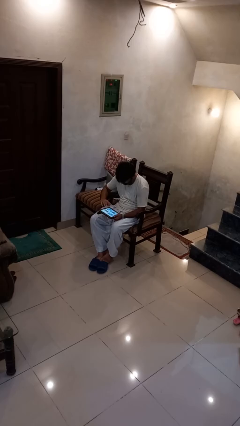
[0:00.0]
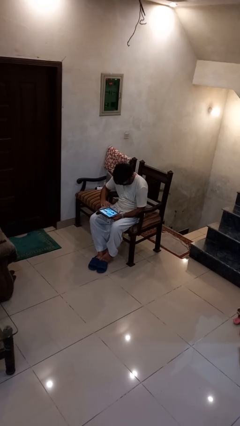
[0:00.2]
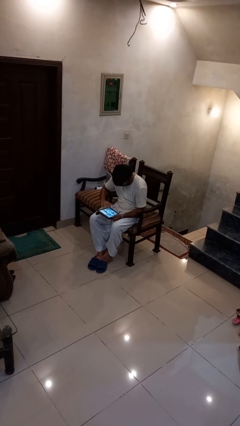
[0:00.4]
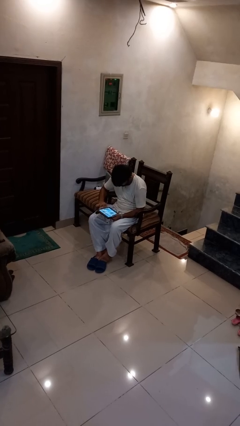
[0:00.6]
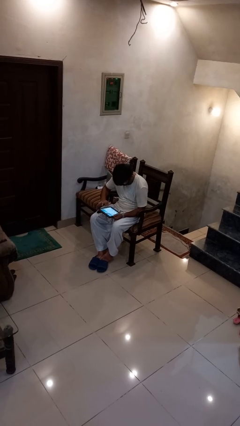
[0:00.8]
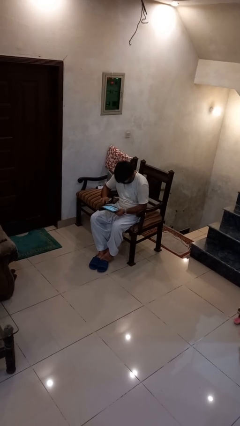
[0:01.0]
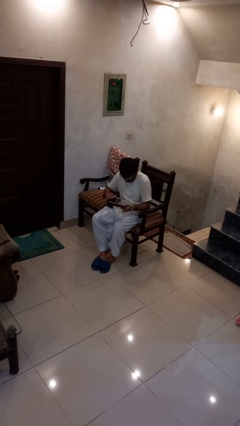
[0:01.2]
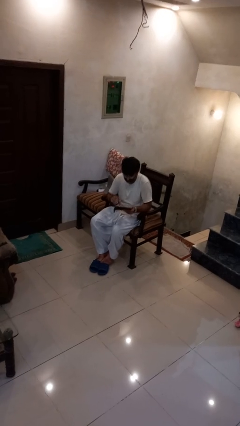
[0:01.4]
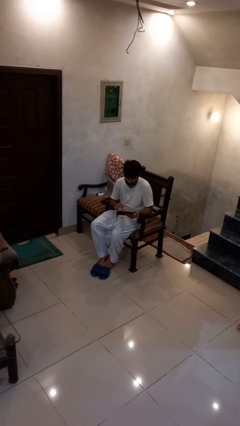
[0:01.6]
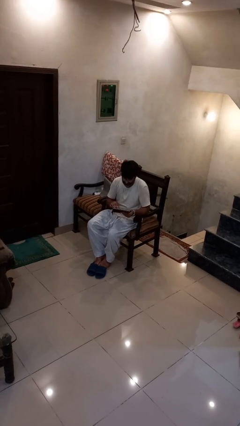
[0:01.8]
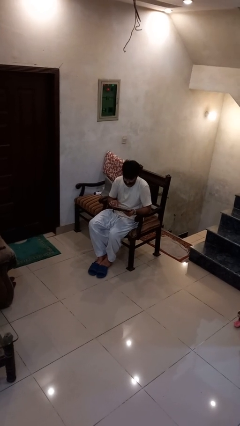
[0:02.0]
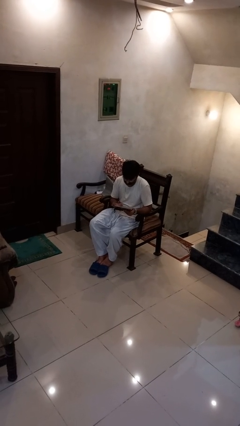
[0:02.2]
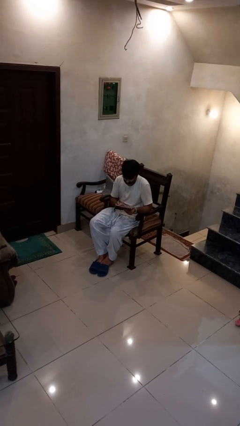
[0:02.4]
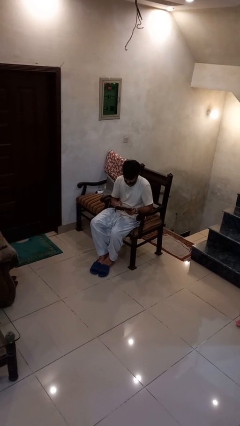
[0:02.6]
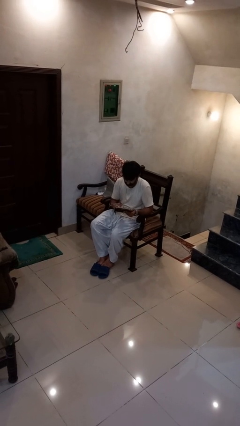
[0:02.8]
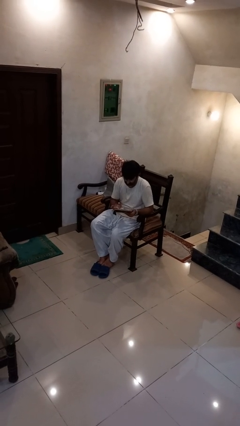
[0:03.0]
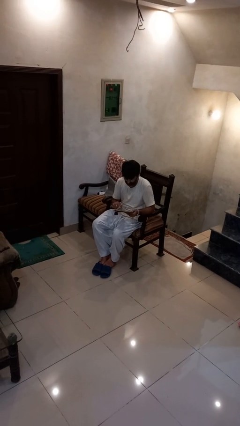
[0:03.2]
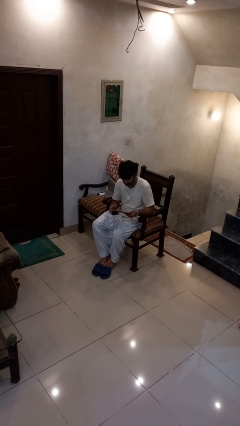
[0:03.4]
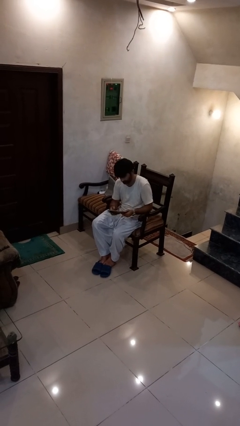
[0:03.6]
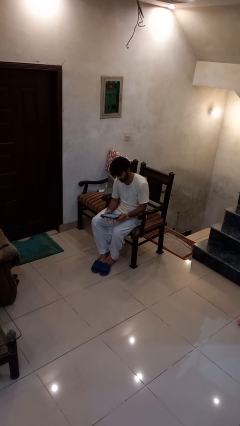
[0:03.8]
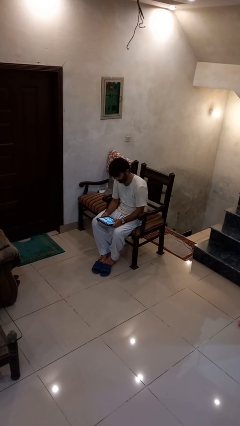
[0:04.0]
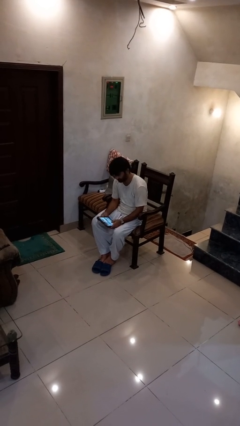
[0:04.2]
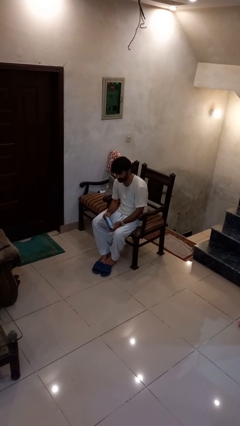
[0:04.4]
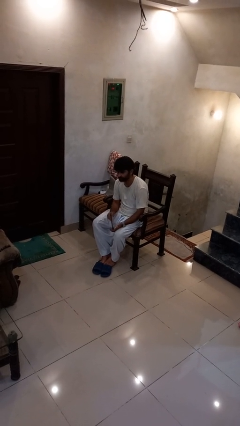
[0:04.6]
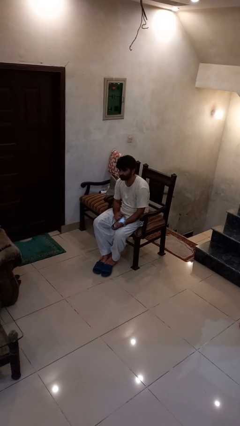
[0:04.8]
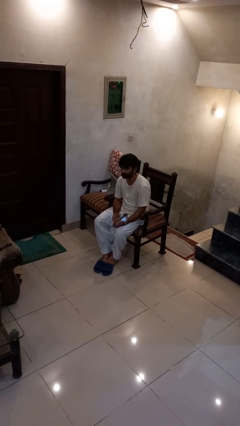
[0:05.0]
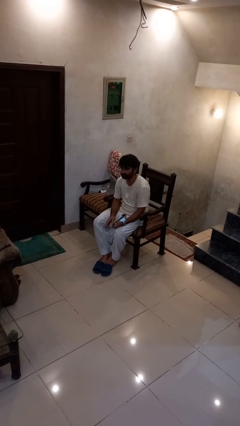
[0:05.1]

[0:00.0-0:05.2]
person interacts with tablet

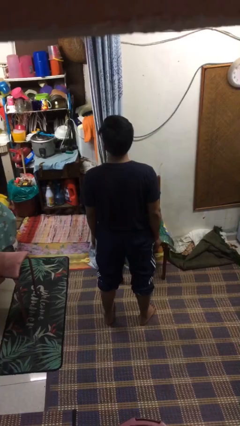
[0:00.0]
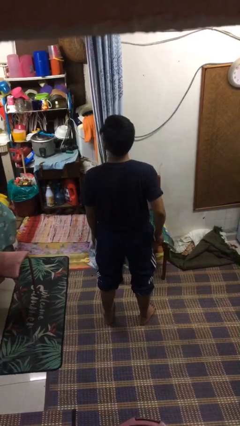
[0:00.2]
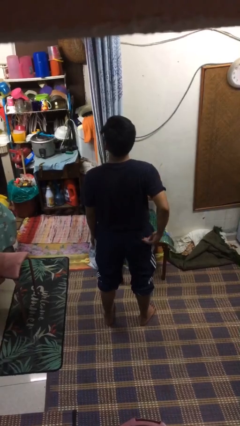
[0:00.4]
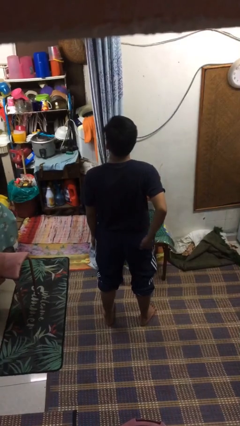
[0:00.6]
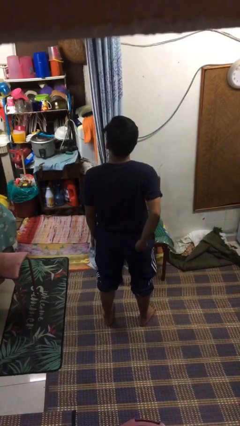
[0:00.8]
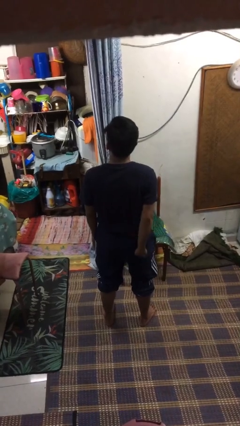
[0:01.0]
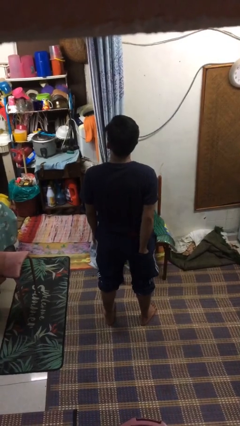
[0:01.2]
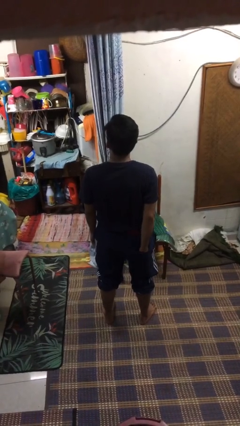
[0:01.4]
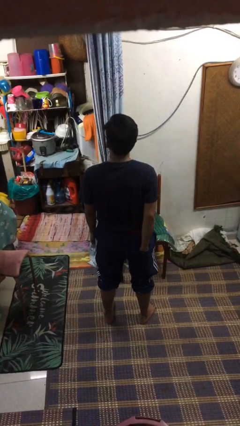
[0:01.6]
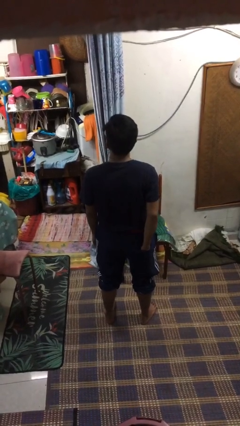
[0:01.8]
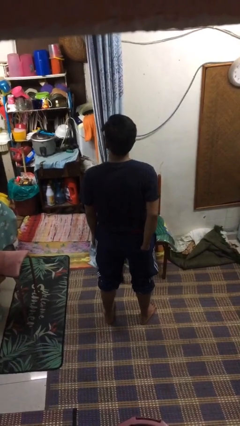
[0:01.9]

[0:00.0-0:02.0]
person puts hands in back pockets

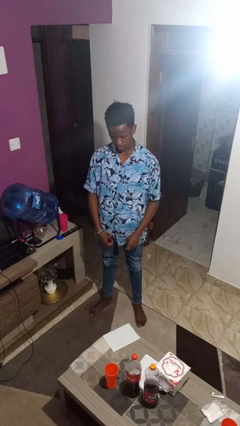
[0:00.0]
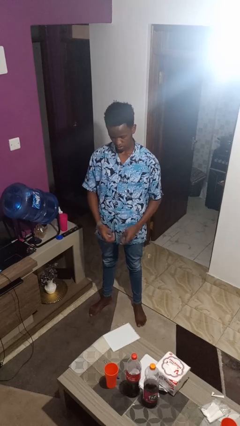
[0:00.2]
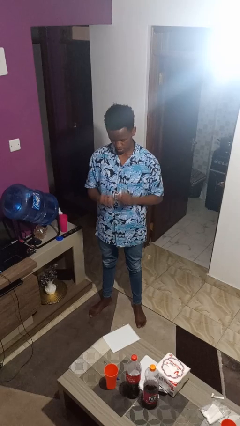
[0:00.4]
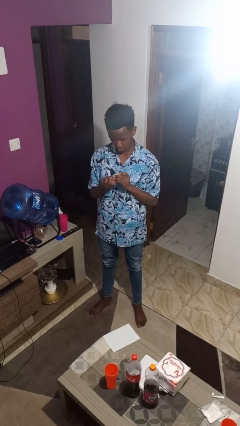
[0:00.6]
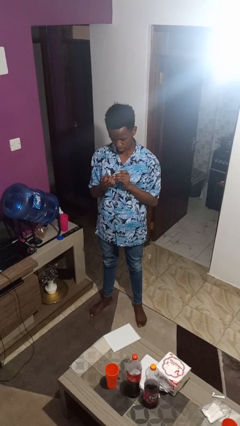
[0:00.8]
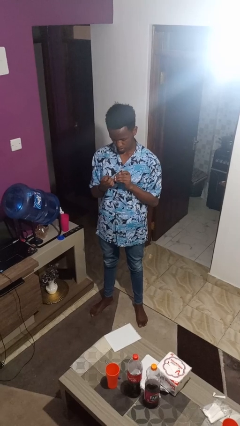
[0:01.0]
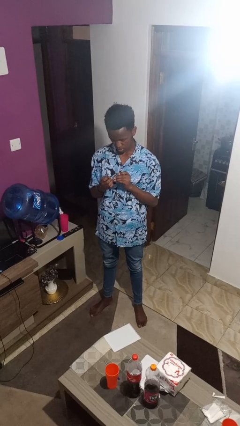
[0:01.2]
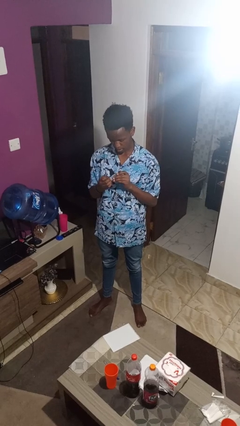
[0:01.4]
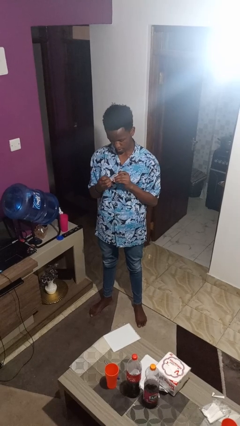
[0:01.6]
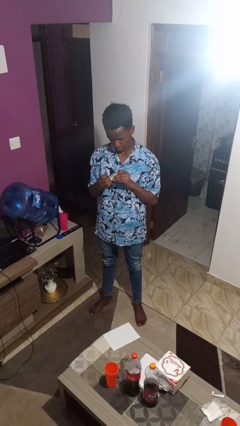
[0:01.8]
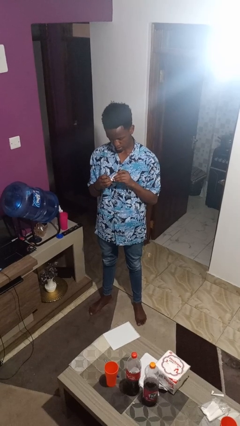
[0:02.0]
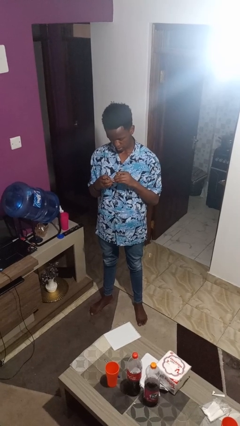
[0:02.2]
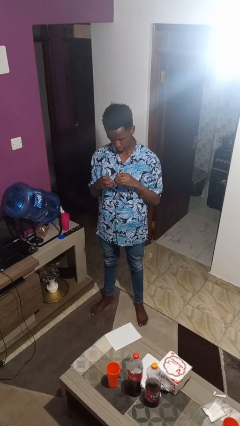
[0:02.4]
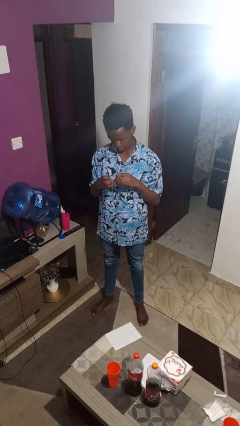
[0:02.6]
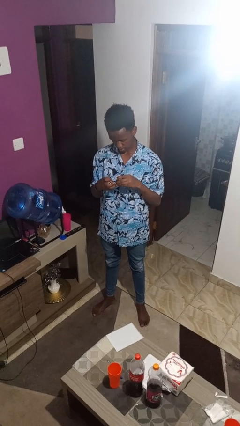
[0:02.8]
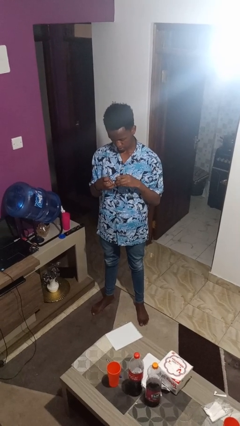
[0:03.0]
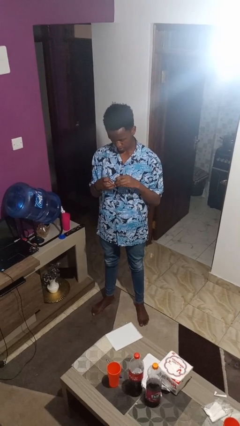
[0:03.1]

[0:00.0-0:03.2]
person clips fingernails

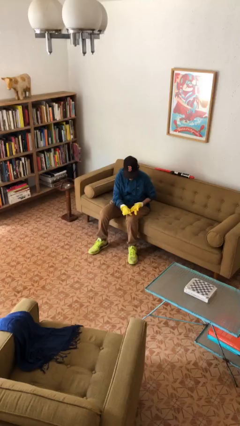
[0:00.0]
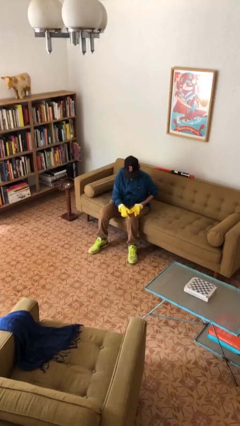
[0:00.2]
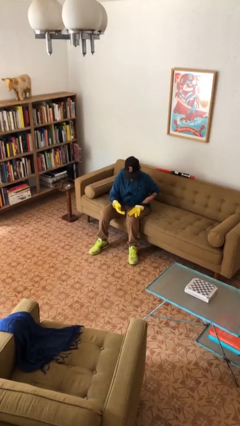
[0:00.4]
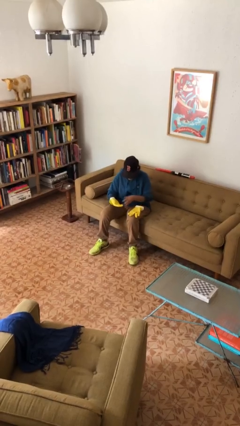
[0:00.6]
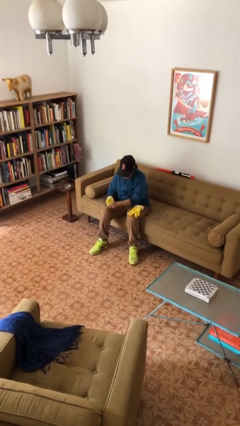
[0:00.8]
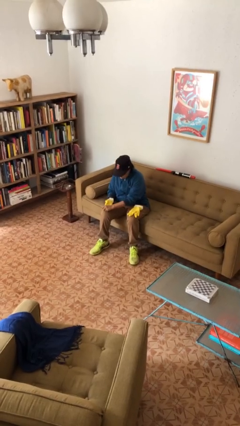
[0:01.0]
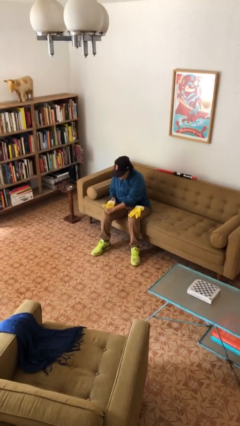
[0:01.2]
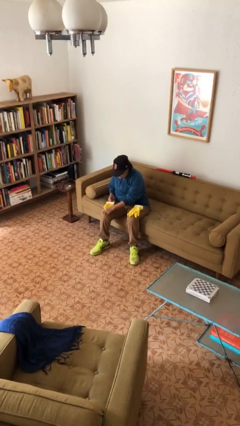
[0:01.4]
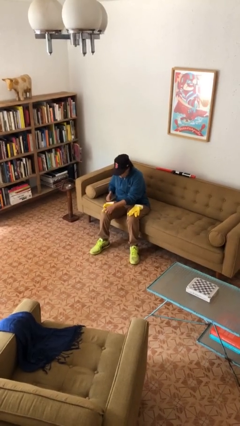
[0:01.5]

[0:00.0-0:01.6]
person takes off gloves

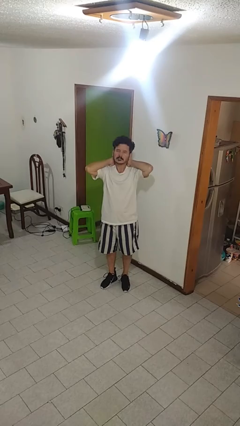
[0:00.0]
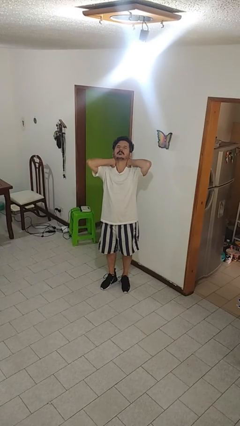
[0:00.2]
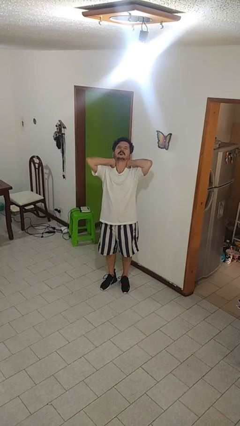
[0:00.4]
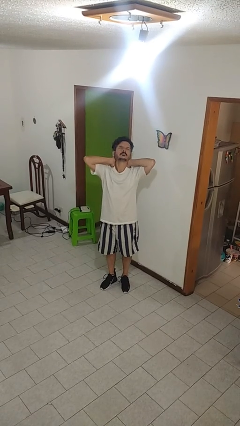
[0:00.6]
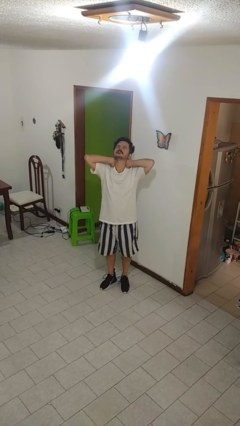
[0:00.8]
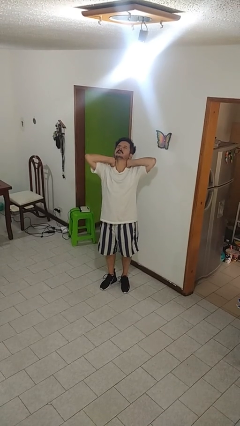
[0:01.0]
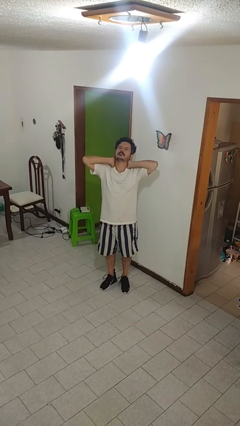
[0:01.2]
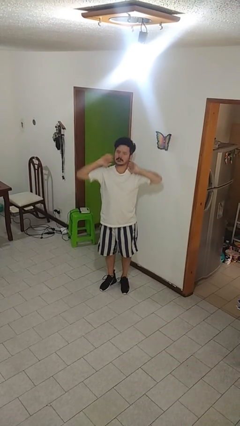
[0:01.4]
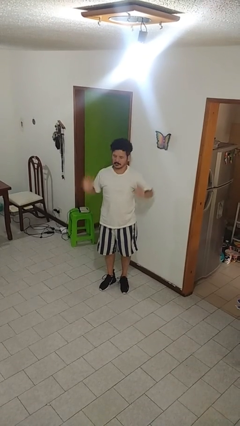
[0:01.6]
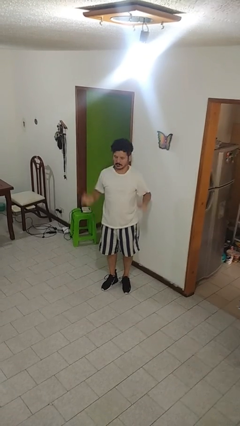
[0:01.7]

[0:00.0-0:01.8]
person rubs neck

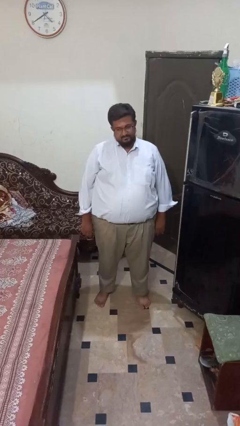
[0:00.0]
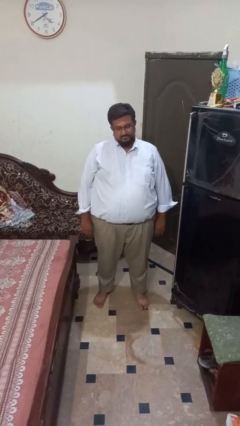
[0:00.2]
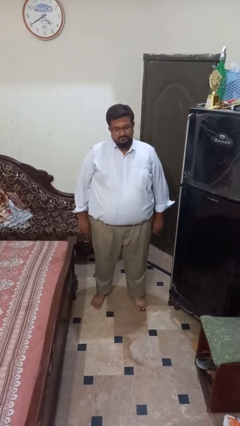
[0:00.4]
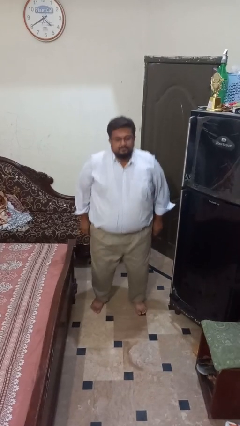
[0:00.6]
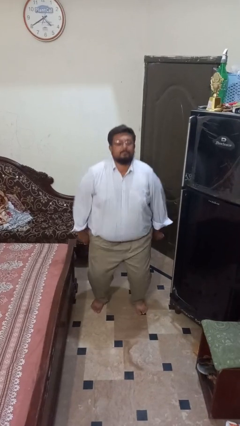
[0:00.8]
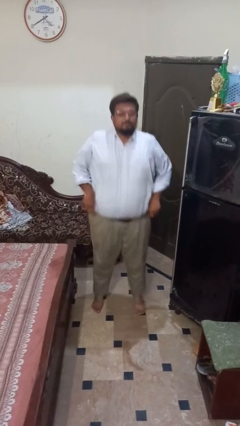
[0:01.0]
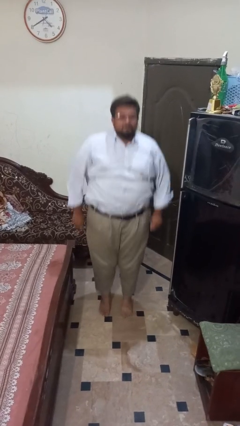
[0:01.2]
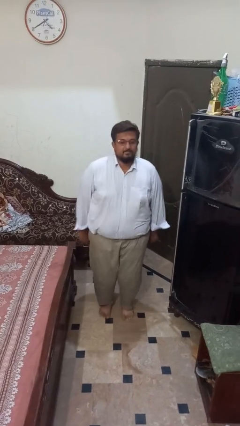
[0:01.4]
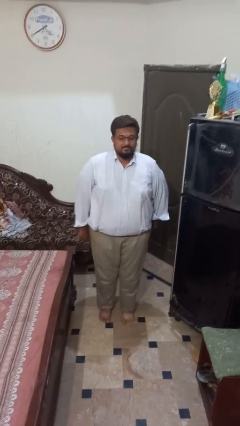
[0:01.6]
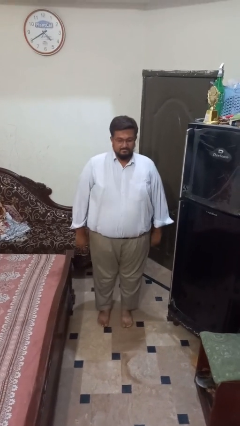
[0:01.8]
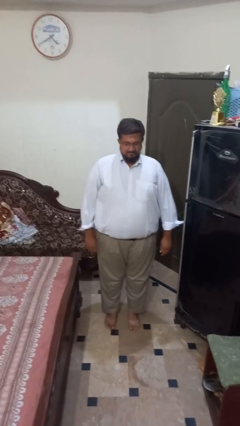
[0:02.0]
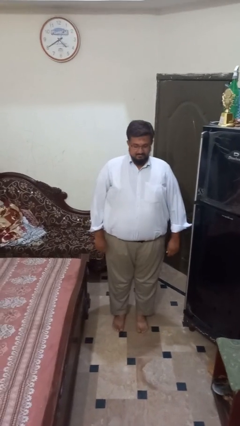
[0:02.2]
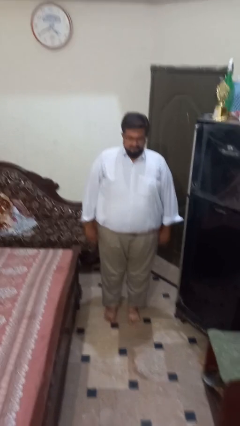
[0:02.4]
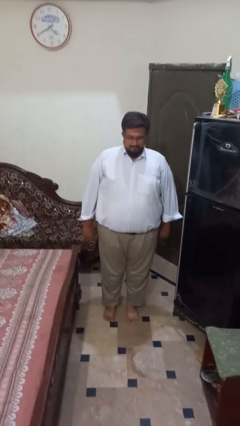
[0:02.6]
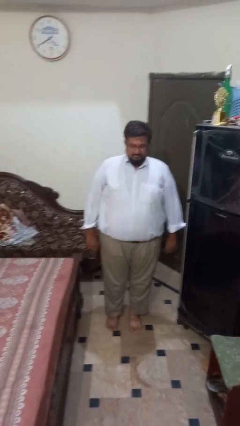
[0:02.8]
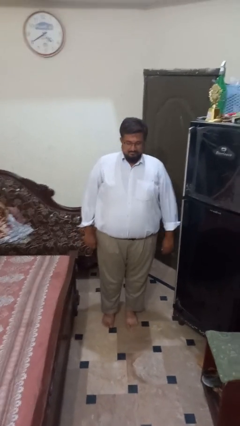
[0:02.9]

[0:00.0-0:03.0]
person jumps

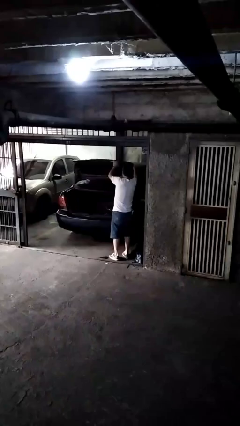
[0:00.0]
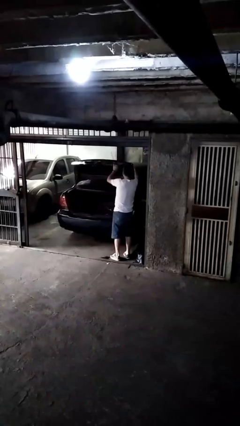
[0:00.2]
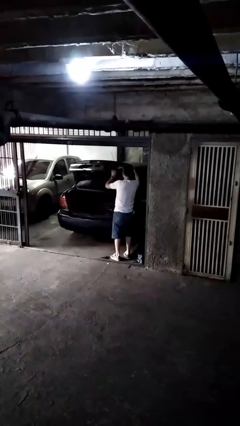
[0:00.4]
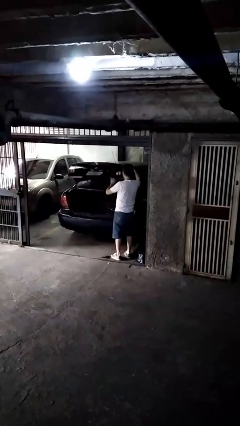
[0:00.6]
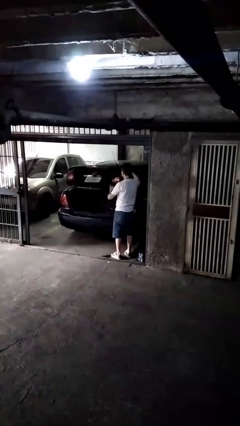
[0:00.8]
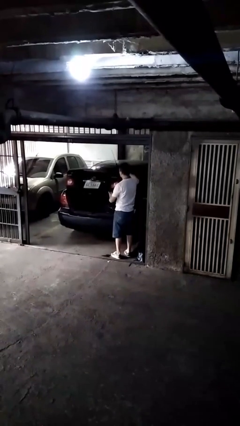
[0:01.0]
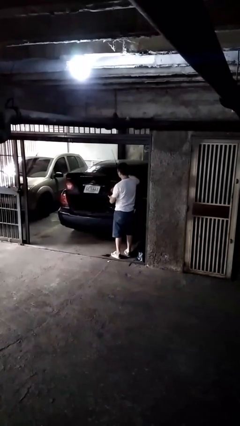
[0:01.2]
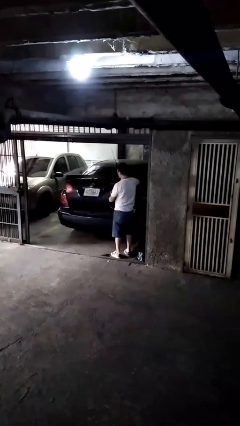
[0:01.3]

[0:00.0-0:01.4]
person closes car trunk
